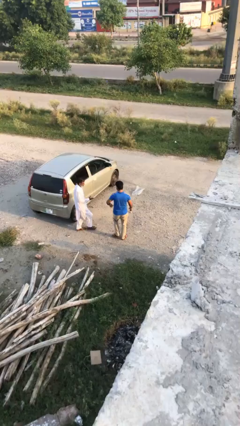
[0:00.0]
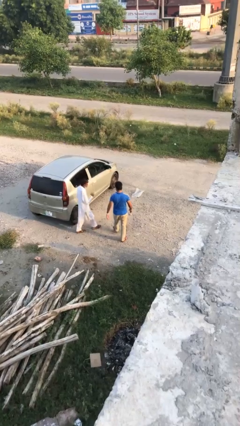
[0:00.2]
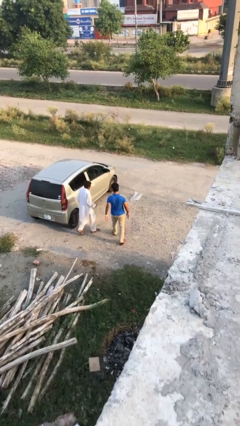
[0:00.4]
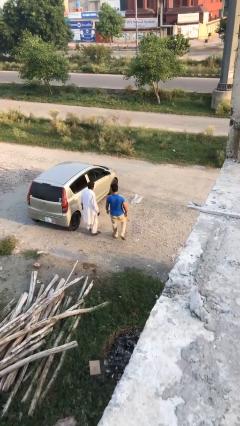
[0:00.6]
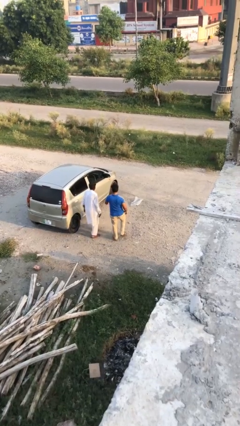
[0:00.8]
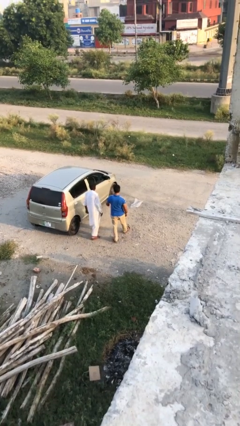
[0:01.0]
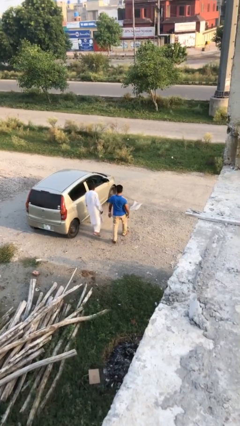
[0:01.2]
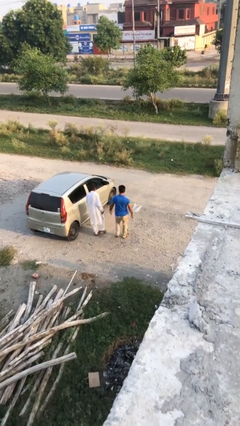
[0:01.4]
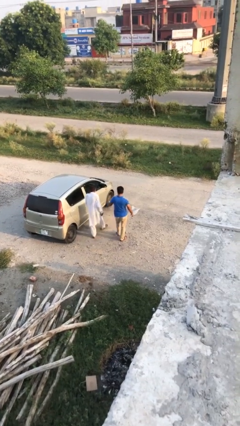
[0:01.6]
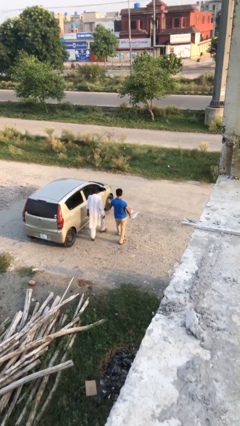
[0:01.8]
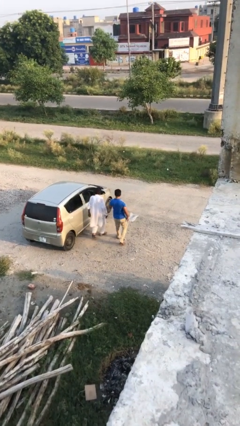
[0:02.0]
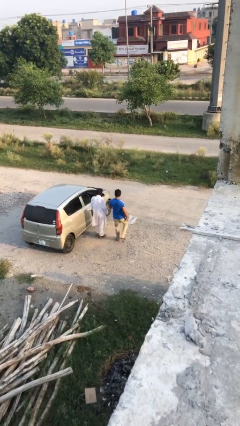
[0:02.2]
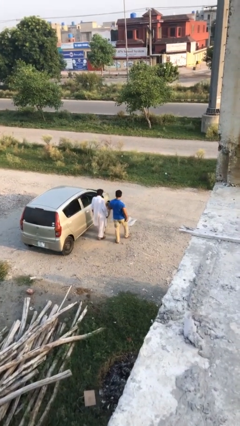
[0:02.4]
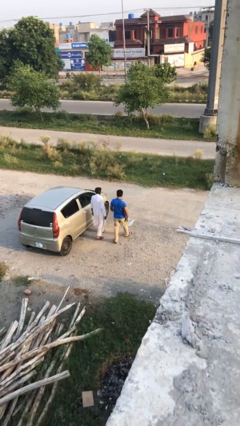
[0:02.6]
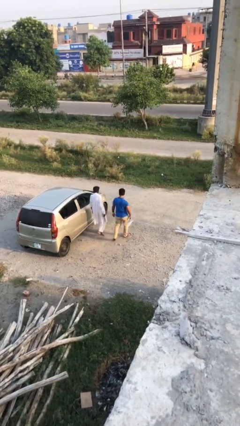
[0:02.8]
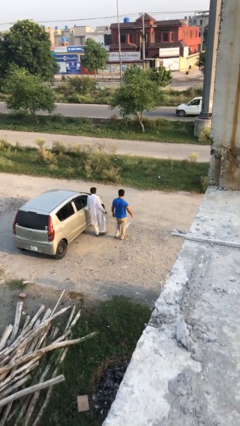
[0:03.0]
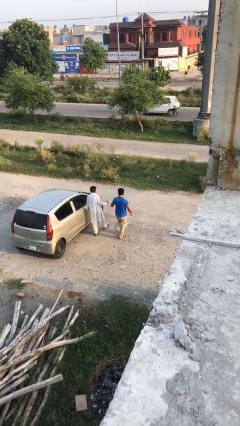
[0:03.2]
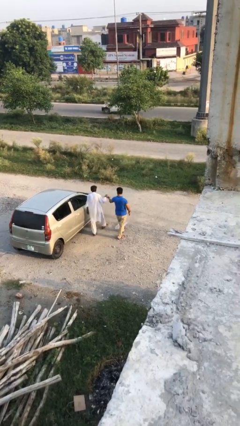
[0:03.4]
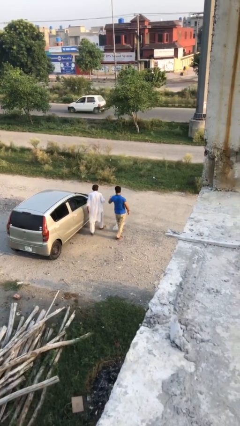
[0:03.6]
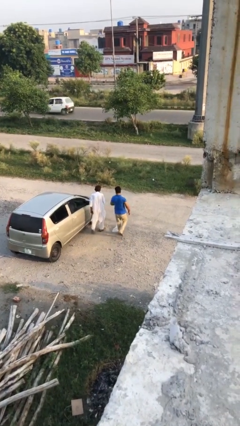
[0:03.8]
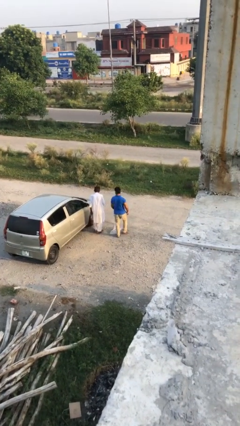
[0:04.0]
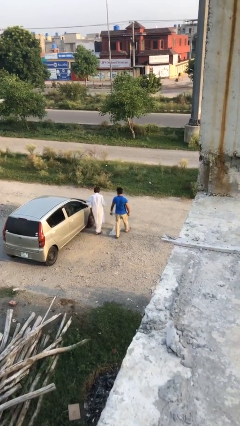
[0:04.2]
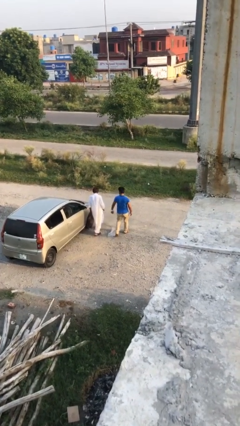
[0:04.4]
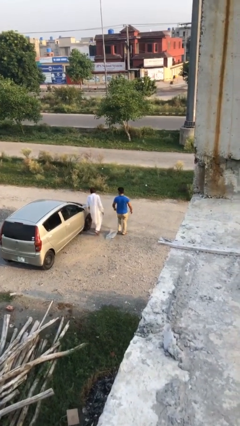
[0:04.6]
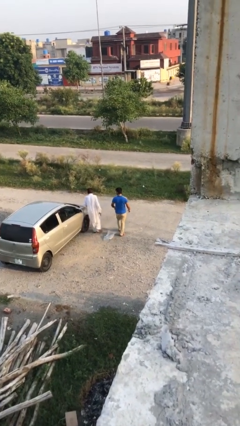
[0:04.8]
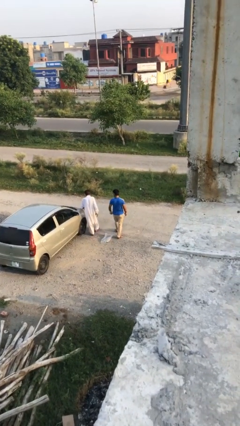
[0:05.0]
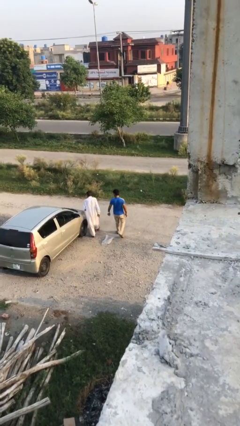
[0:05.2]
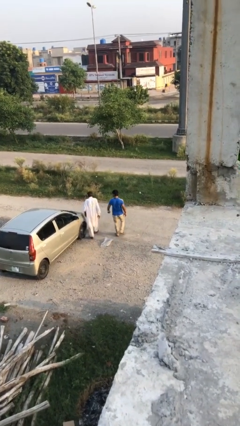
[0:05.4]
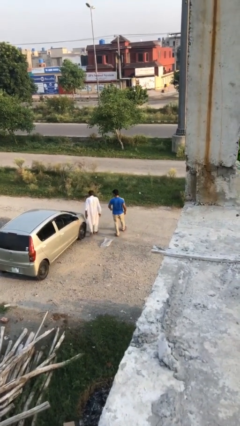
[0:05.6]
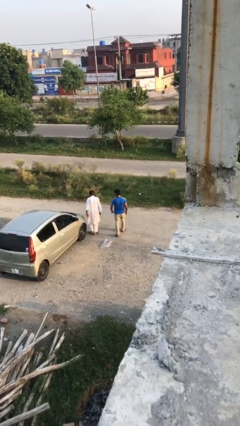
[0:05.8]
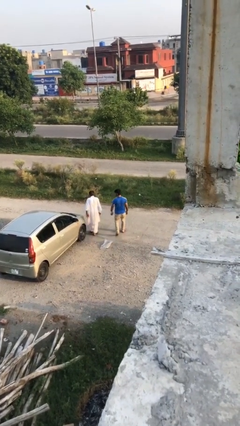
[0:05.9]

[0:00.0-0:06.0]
person talks to person

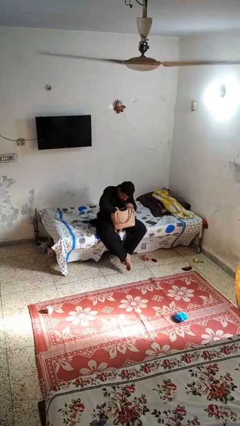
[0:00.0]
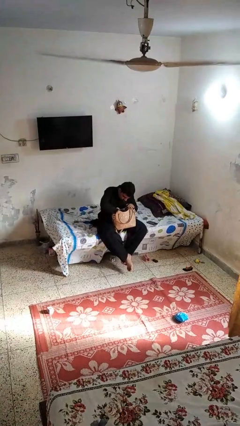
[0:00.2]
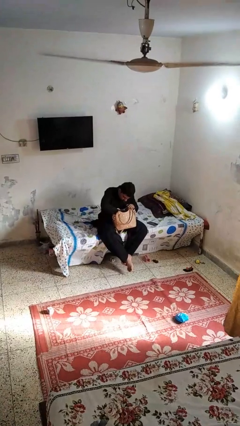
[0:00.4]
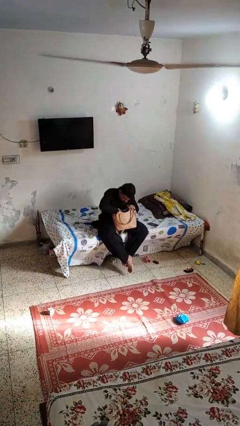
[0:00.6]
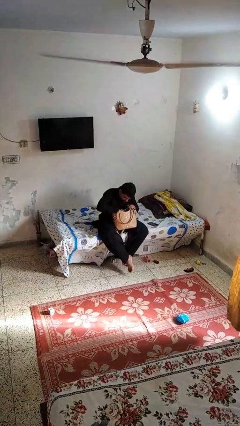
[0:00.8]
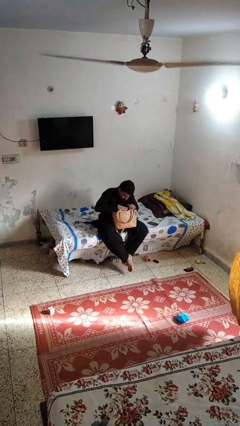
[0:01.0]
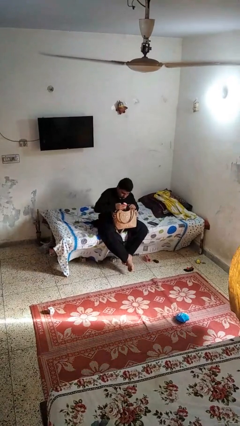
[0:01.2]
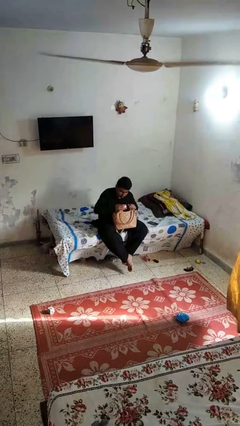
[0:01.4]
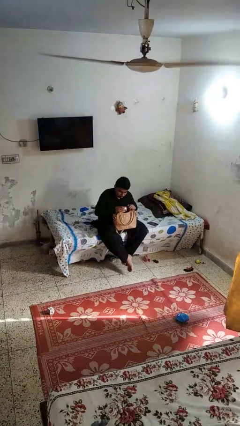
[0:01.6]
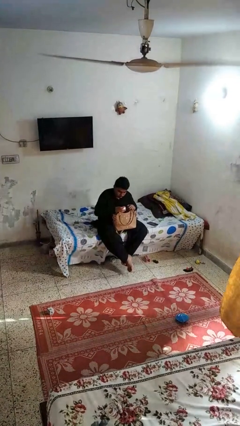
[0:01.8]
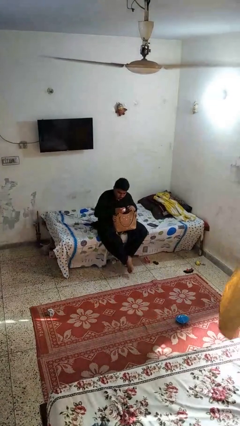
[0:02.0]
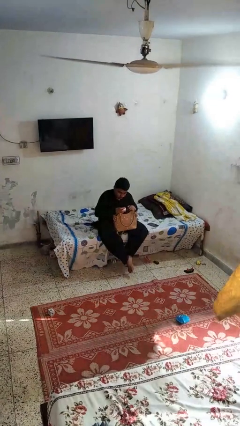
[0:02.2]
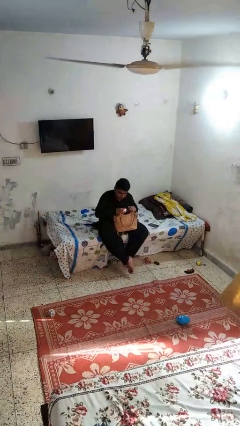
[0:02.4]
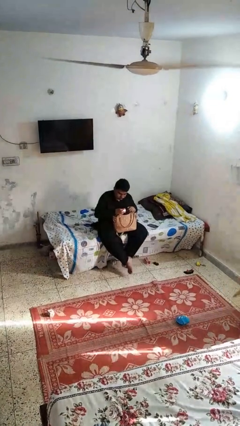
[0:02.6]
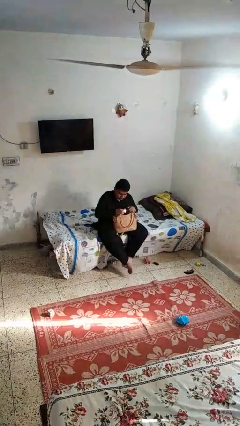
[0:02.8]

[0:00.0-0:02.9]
person takes object from purse

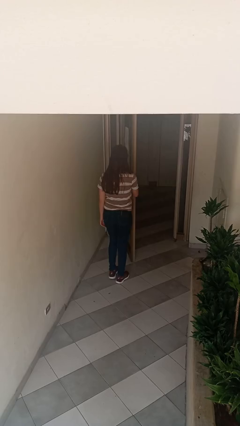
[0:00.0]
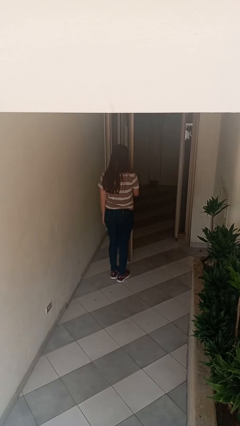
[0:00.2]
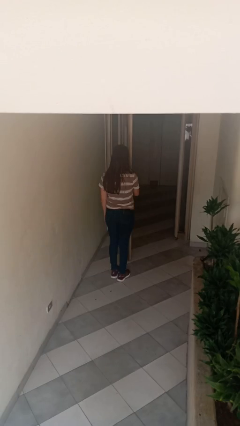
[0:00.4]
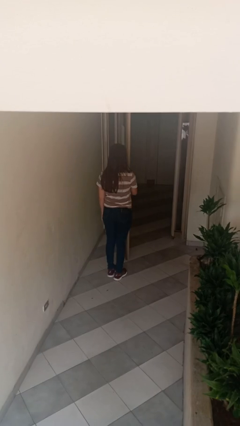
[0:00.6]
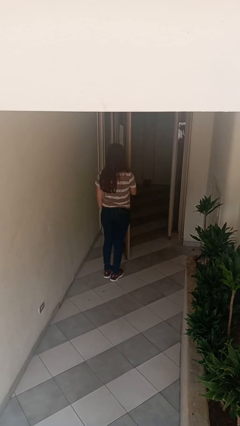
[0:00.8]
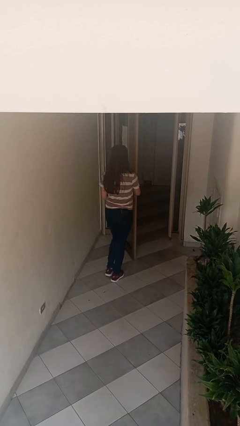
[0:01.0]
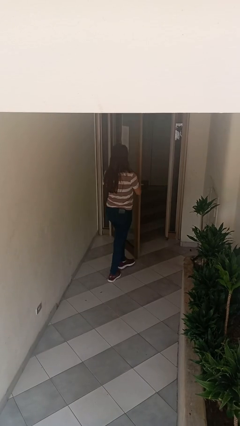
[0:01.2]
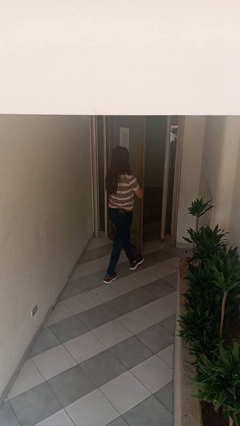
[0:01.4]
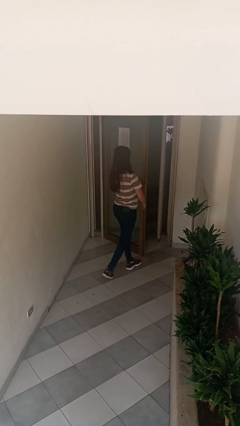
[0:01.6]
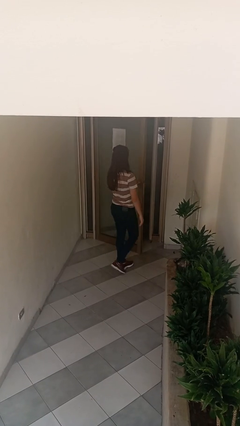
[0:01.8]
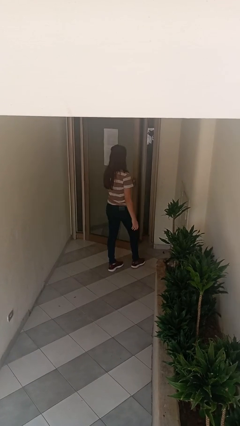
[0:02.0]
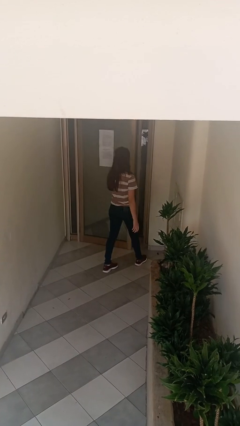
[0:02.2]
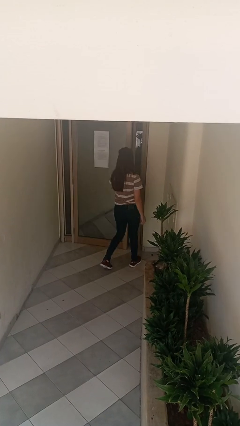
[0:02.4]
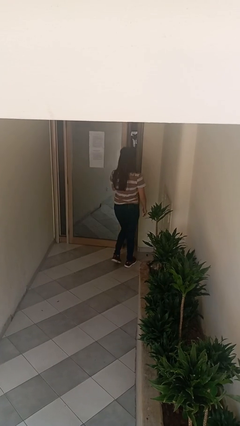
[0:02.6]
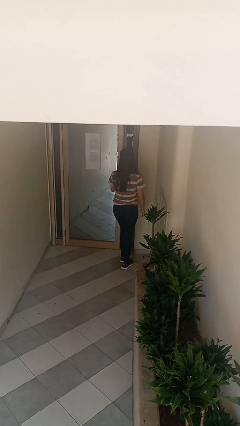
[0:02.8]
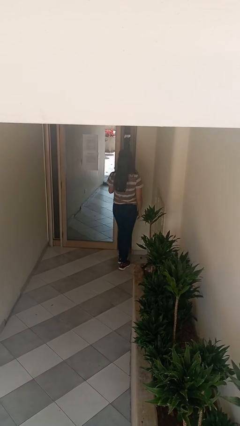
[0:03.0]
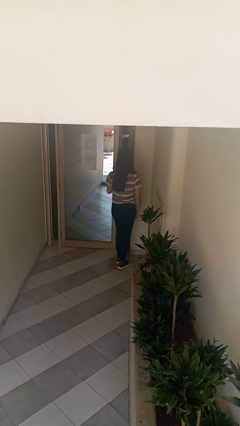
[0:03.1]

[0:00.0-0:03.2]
person closes facility door

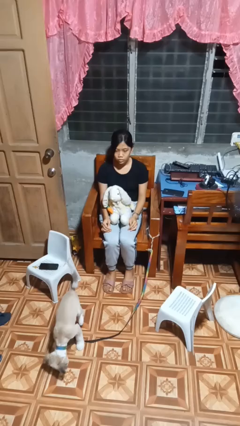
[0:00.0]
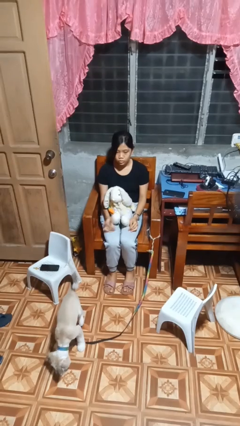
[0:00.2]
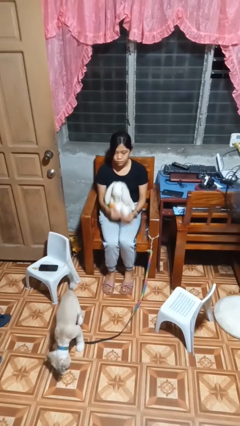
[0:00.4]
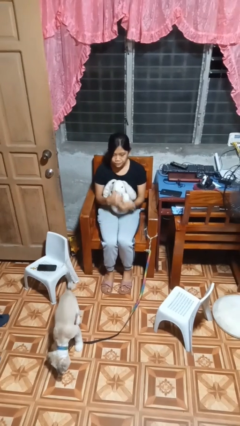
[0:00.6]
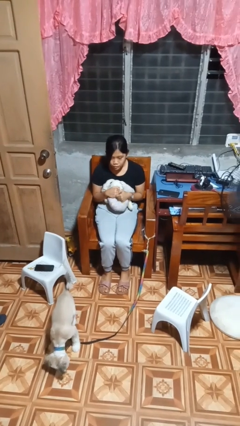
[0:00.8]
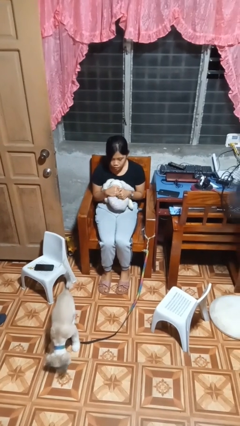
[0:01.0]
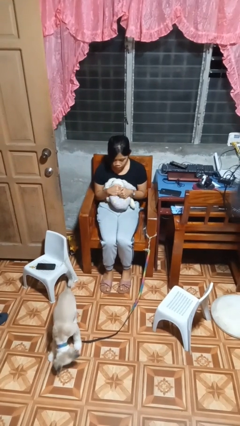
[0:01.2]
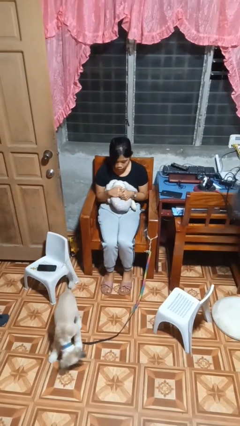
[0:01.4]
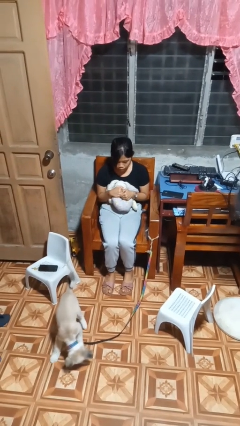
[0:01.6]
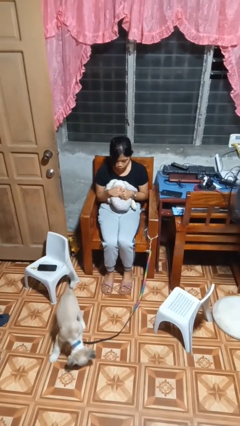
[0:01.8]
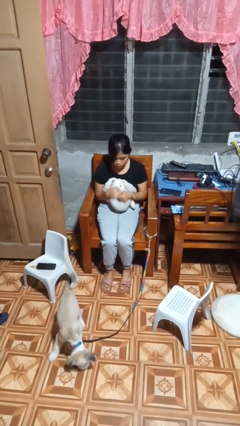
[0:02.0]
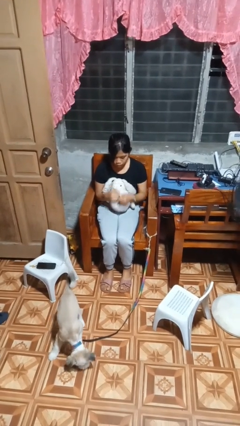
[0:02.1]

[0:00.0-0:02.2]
person hugs stuffed animal

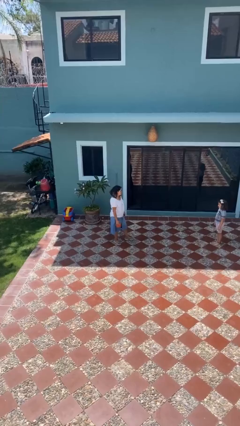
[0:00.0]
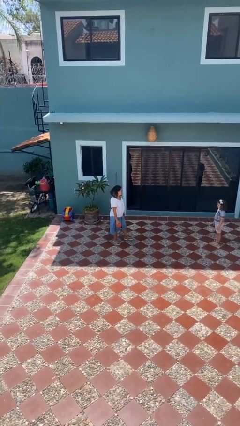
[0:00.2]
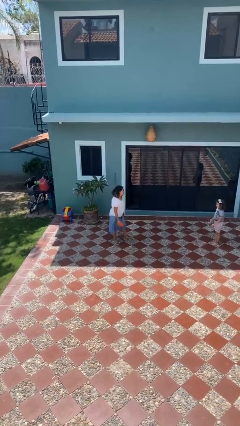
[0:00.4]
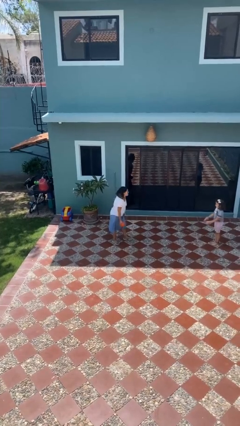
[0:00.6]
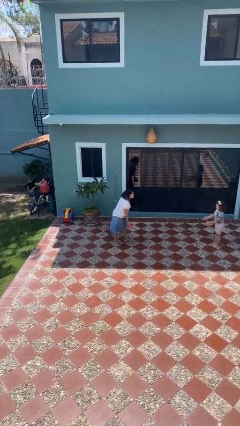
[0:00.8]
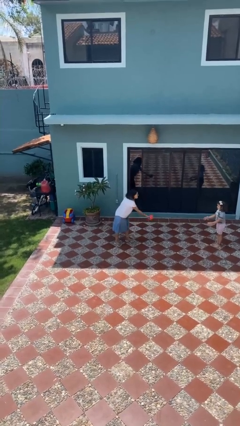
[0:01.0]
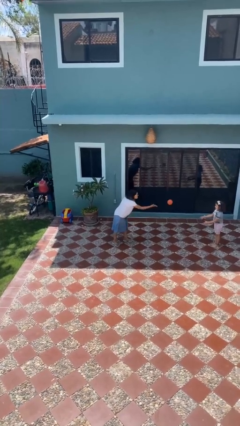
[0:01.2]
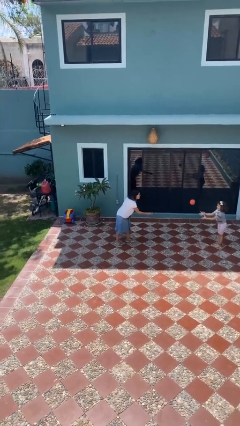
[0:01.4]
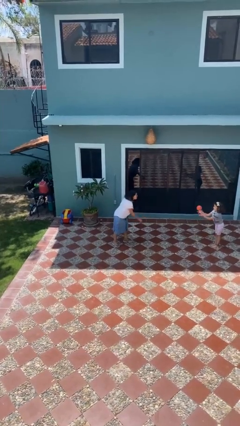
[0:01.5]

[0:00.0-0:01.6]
person throws object to person

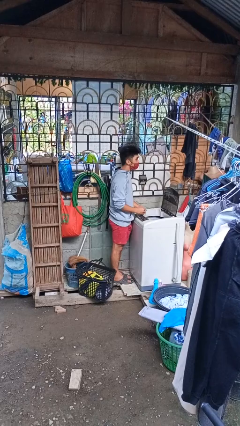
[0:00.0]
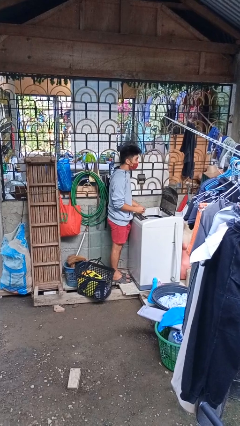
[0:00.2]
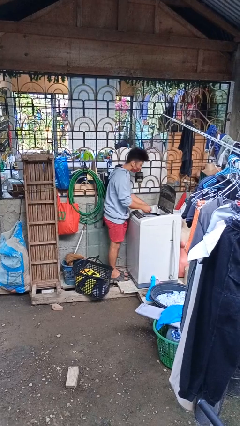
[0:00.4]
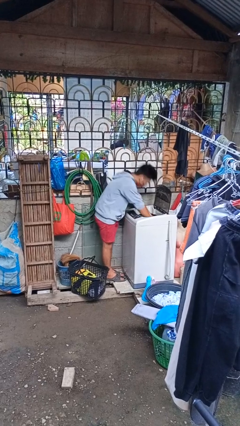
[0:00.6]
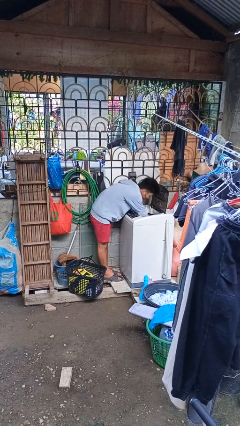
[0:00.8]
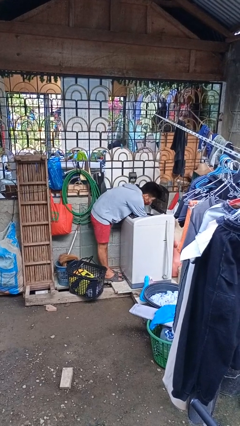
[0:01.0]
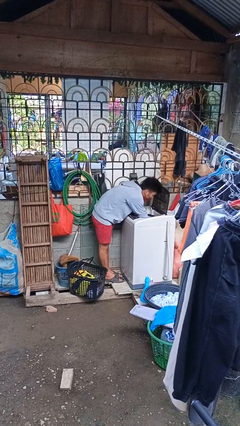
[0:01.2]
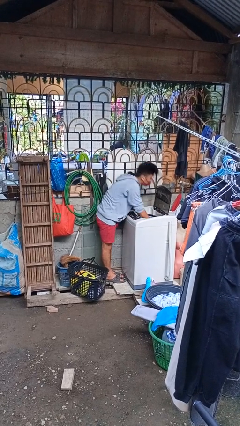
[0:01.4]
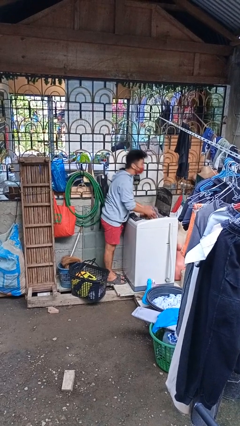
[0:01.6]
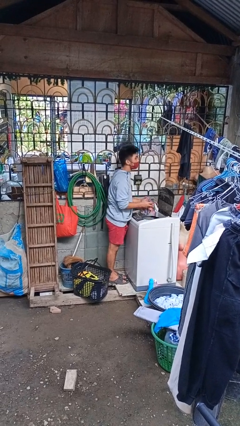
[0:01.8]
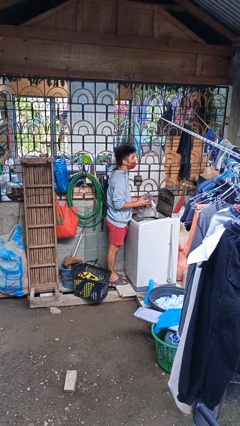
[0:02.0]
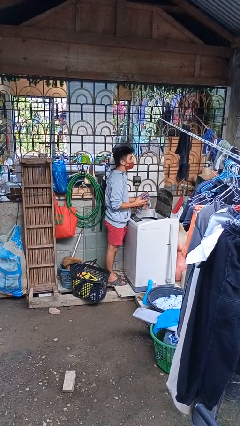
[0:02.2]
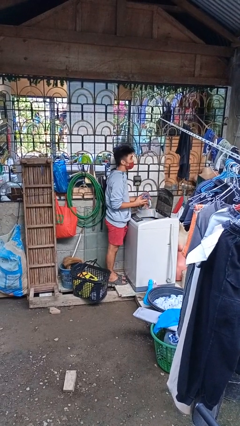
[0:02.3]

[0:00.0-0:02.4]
person unloads clotheswasher
